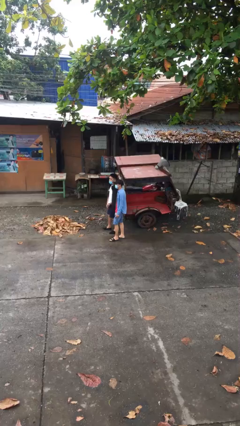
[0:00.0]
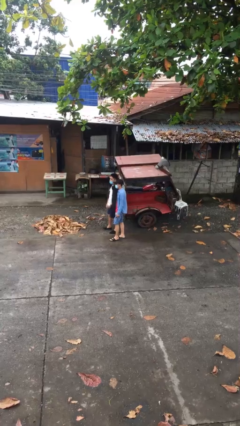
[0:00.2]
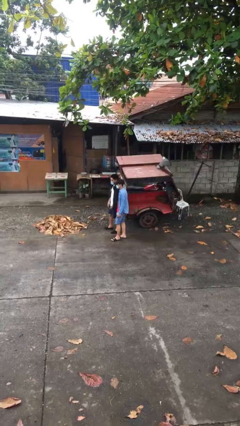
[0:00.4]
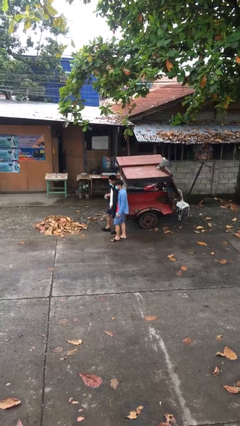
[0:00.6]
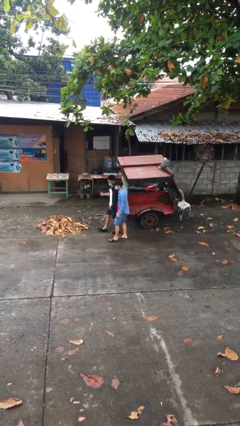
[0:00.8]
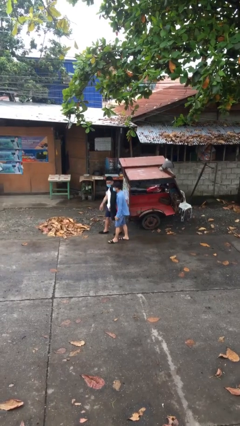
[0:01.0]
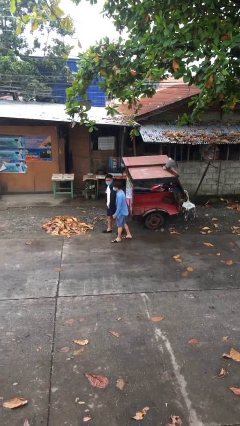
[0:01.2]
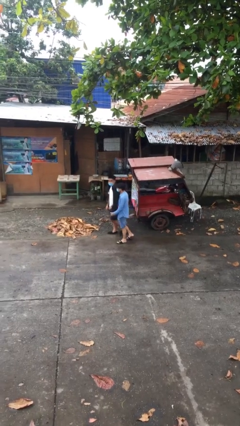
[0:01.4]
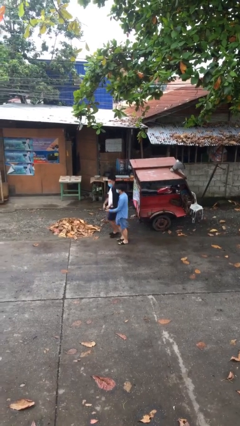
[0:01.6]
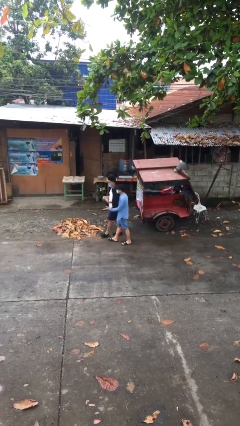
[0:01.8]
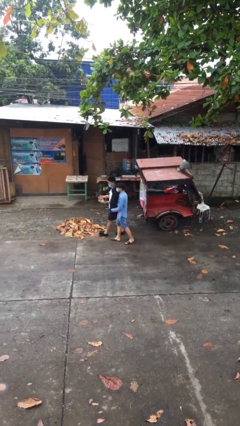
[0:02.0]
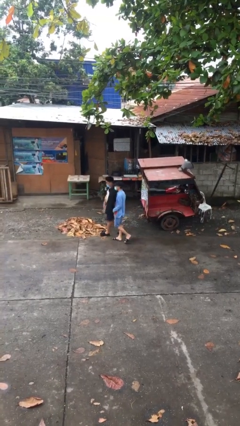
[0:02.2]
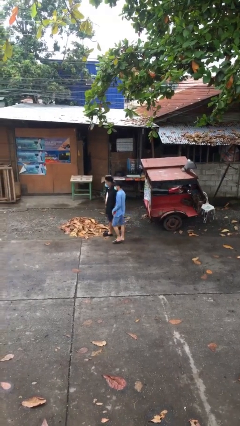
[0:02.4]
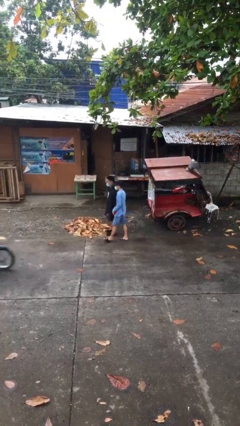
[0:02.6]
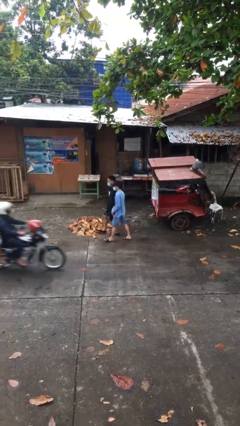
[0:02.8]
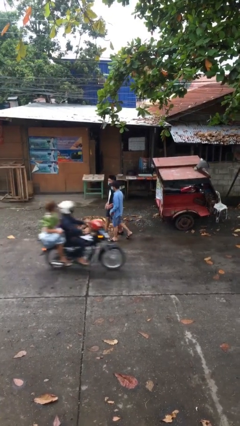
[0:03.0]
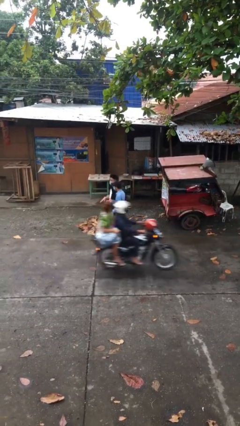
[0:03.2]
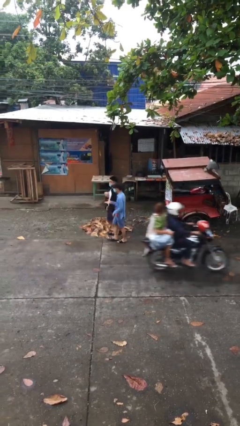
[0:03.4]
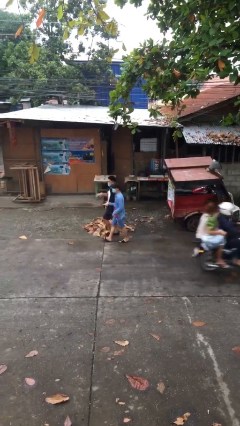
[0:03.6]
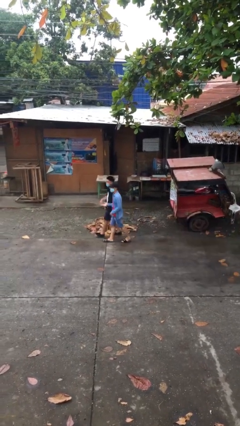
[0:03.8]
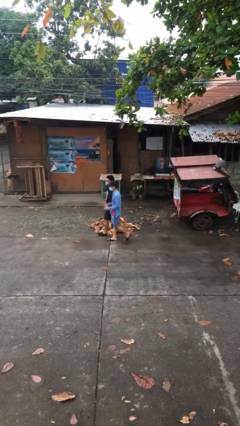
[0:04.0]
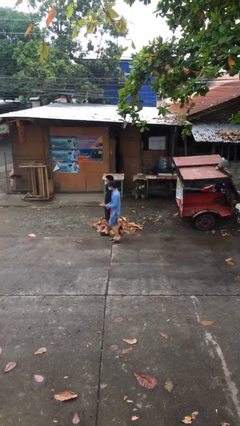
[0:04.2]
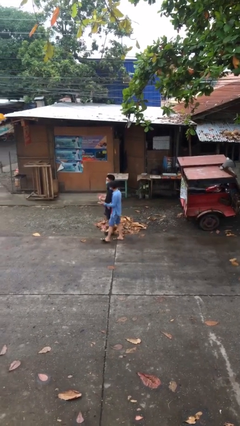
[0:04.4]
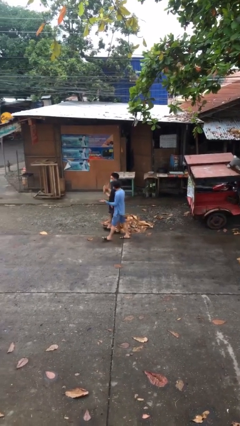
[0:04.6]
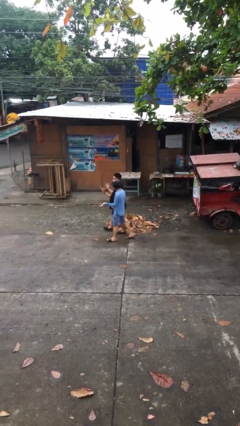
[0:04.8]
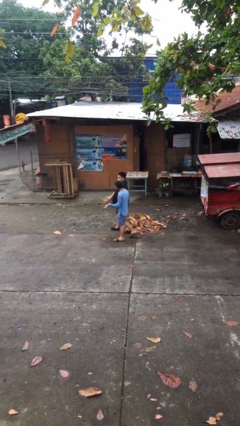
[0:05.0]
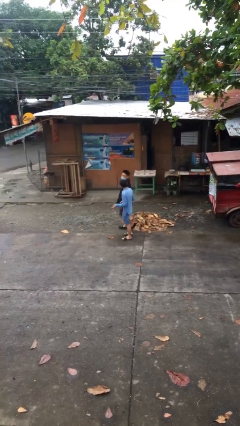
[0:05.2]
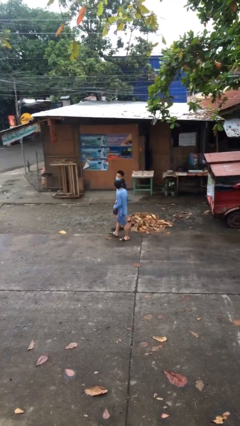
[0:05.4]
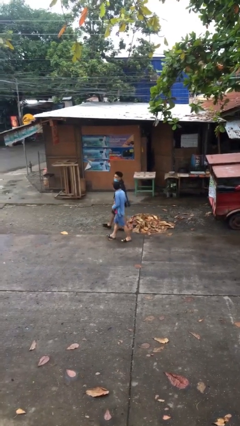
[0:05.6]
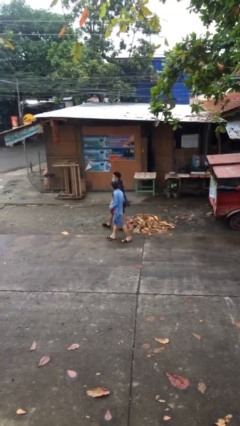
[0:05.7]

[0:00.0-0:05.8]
person talks to person

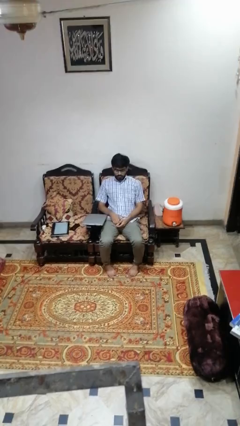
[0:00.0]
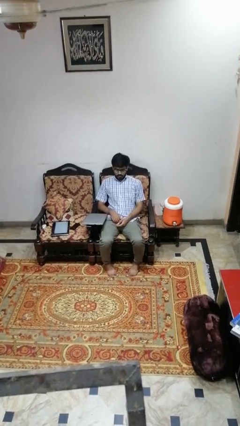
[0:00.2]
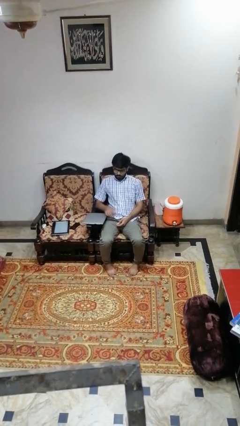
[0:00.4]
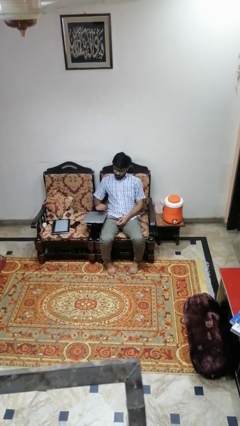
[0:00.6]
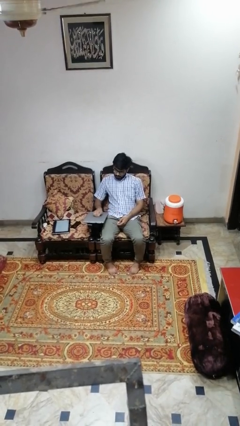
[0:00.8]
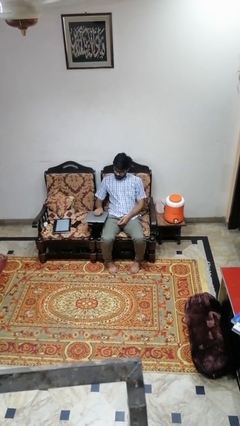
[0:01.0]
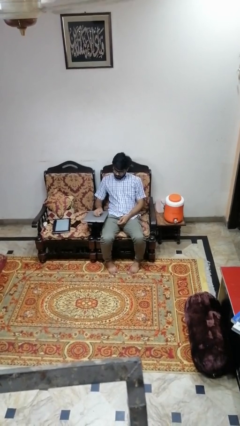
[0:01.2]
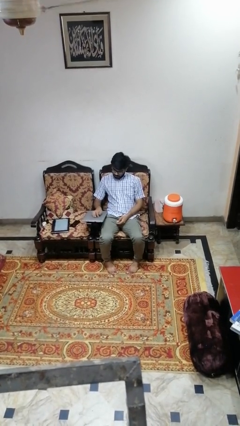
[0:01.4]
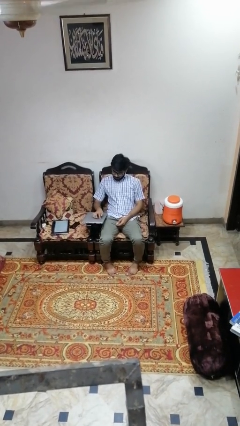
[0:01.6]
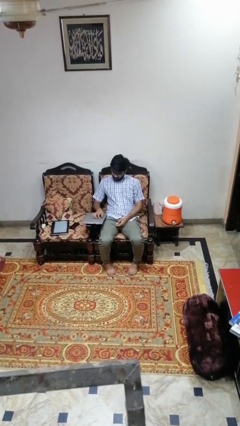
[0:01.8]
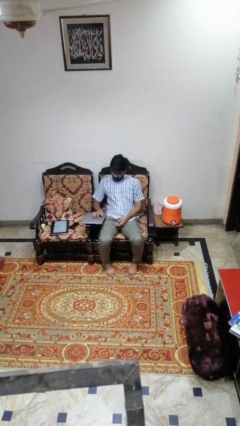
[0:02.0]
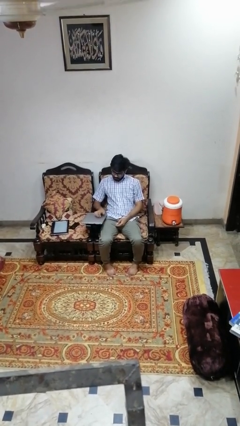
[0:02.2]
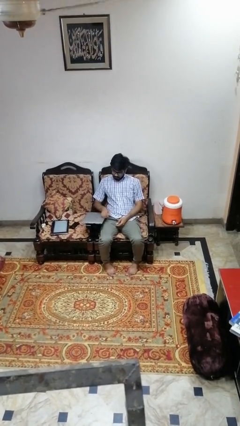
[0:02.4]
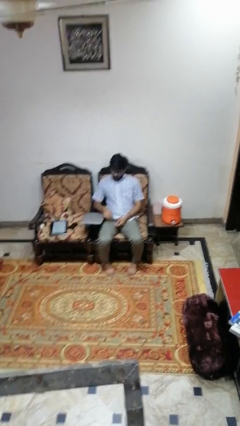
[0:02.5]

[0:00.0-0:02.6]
person taps object with finger

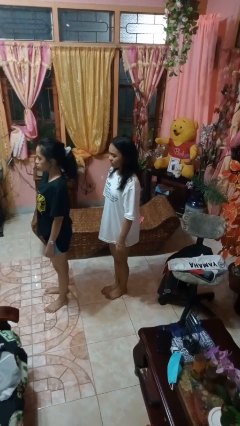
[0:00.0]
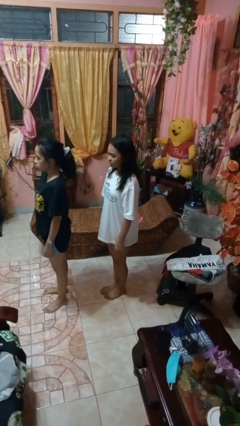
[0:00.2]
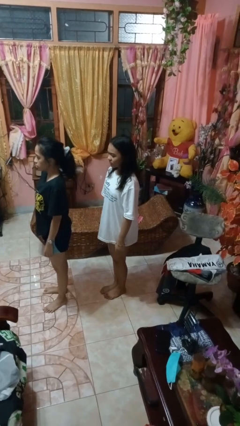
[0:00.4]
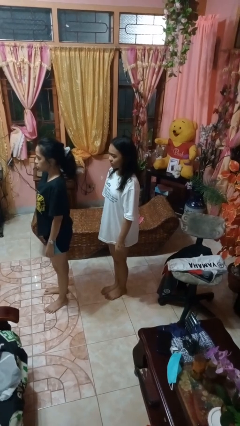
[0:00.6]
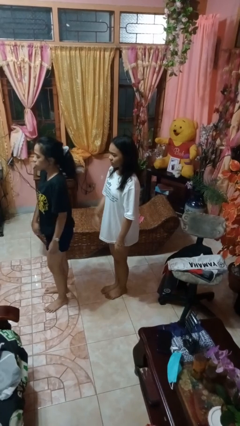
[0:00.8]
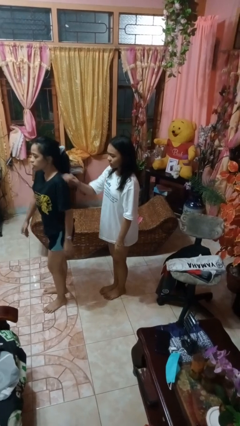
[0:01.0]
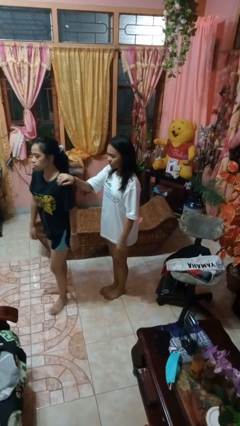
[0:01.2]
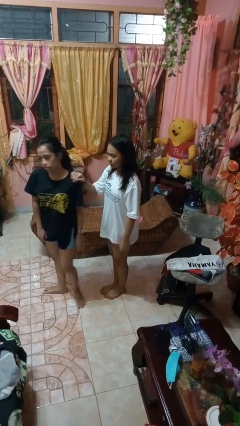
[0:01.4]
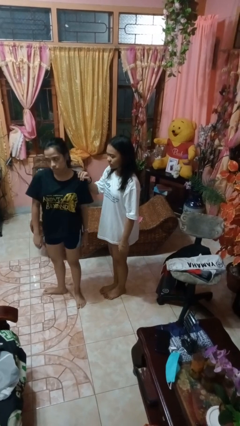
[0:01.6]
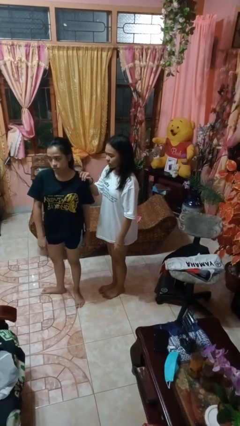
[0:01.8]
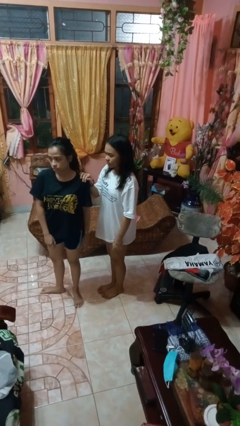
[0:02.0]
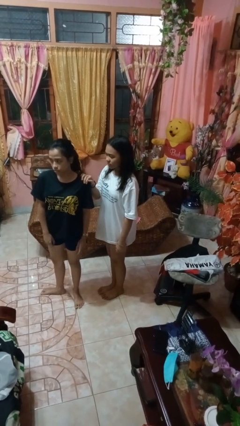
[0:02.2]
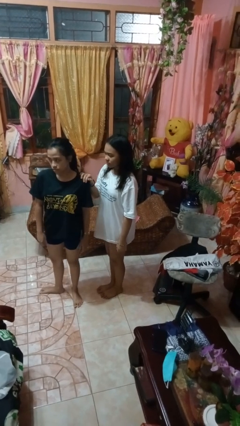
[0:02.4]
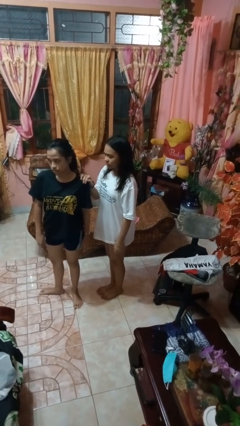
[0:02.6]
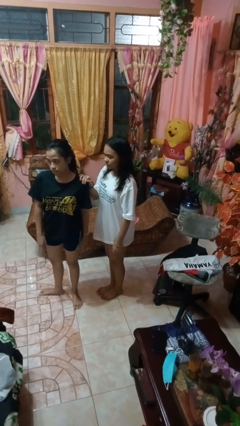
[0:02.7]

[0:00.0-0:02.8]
person grabs person by shoulder

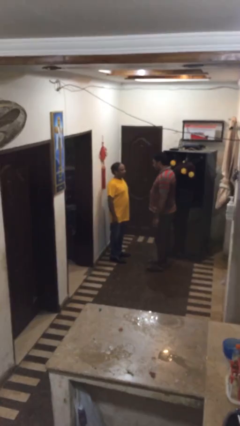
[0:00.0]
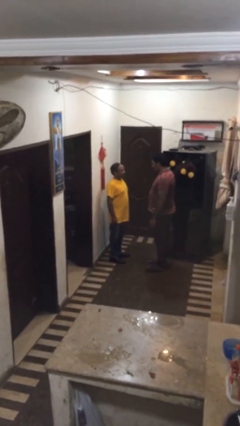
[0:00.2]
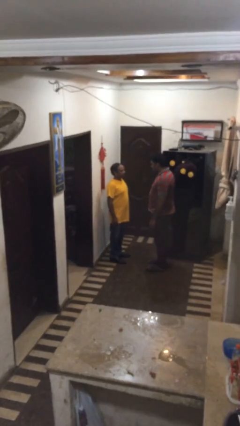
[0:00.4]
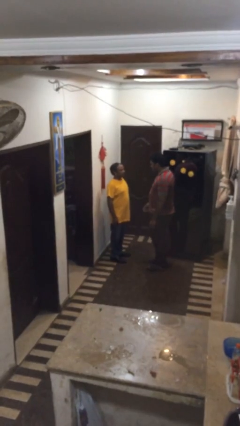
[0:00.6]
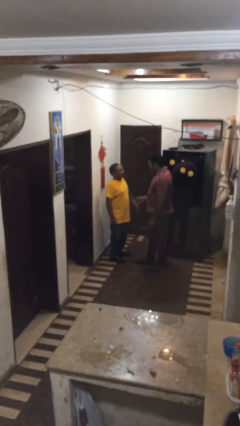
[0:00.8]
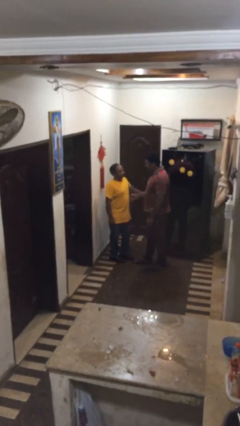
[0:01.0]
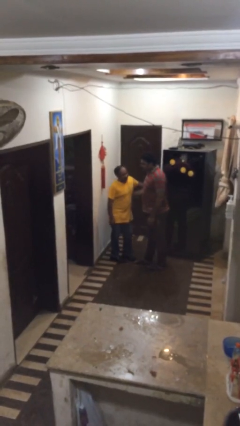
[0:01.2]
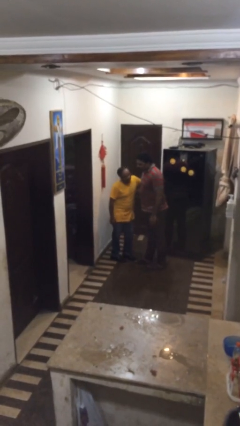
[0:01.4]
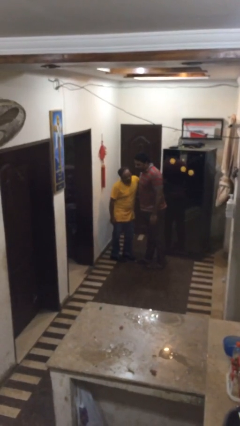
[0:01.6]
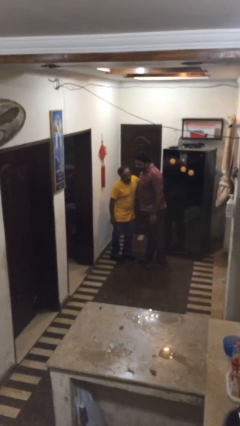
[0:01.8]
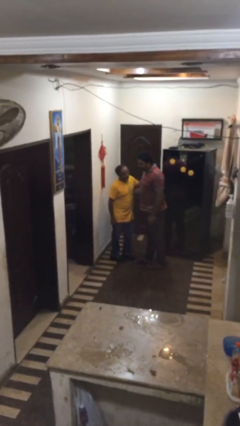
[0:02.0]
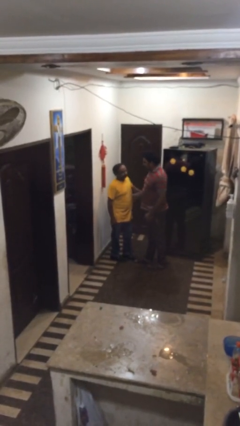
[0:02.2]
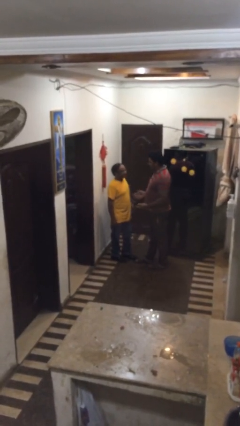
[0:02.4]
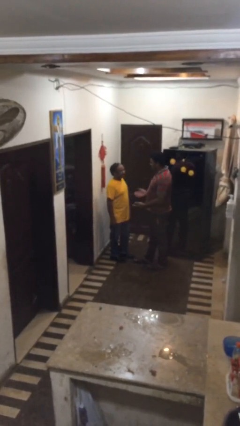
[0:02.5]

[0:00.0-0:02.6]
person embraces person

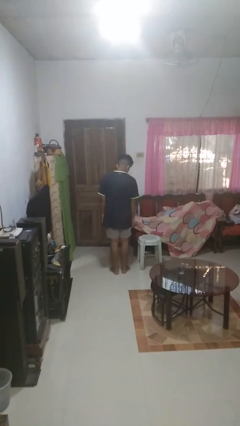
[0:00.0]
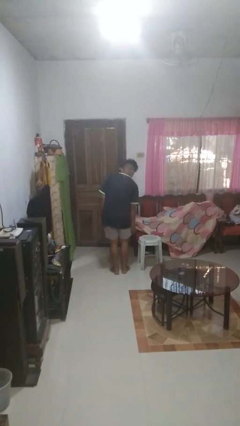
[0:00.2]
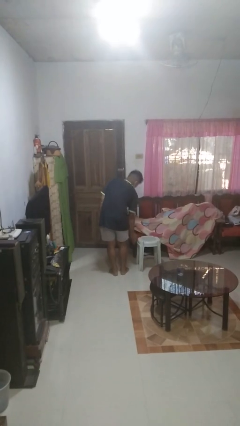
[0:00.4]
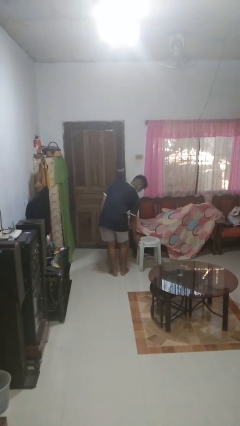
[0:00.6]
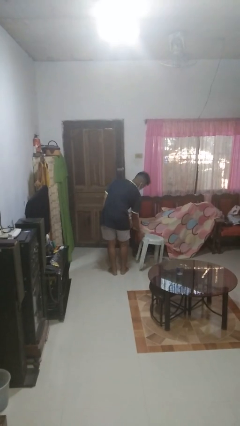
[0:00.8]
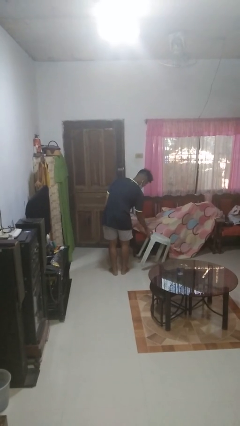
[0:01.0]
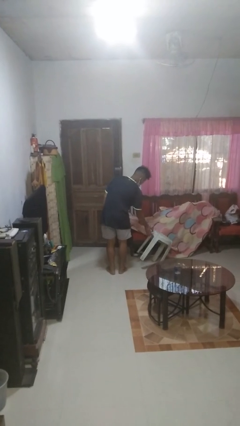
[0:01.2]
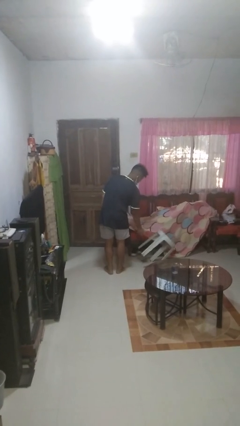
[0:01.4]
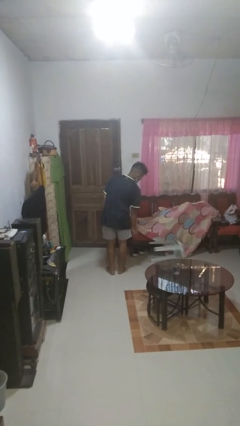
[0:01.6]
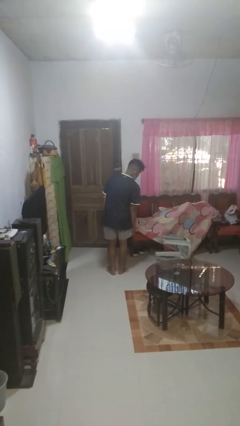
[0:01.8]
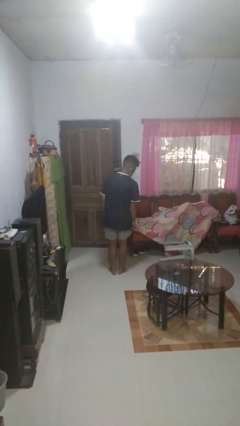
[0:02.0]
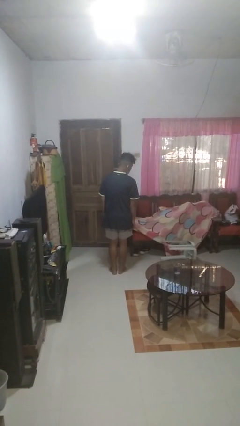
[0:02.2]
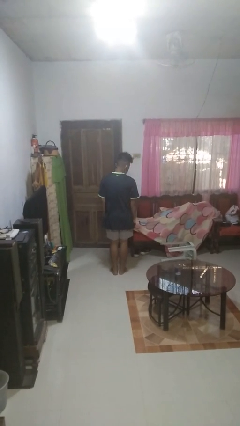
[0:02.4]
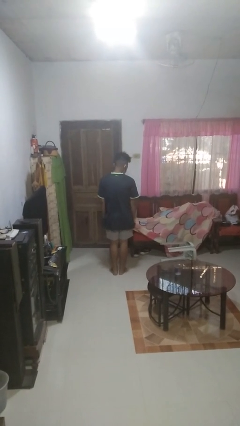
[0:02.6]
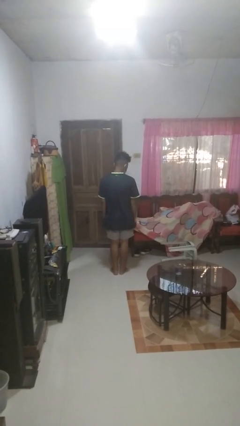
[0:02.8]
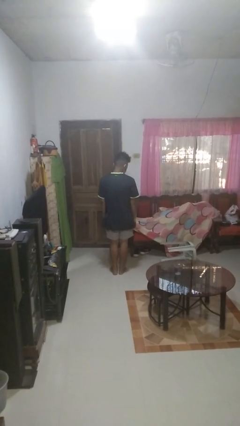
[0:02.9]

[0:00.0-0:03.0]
person knocks over furniture

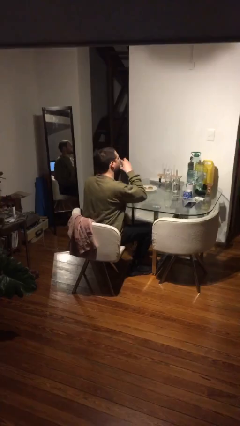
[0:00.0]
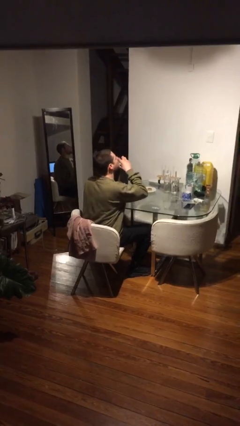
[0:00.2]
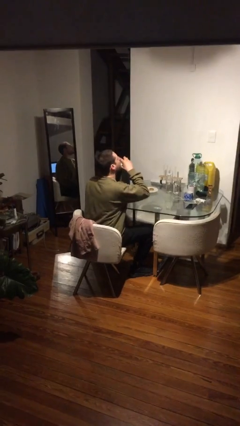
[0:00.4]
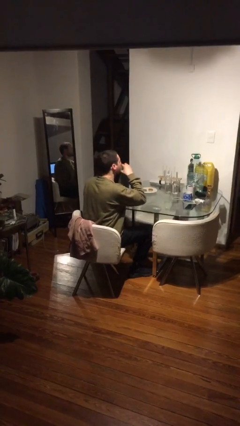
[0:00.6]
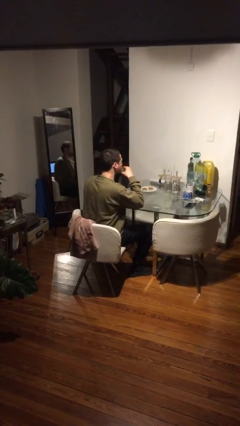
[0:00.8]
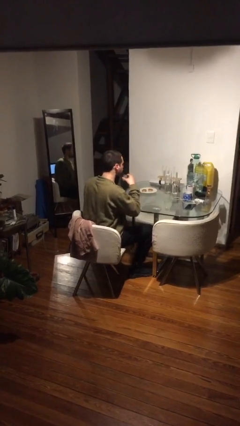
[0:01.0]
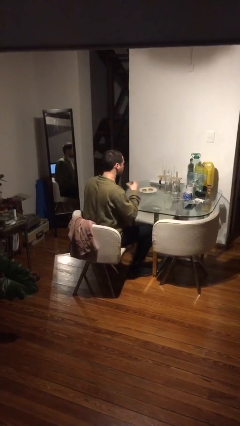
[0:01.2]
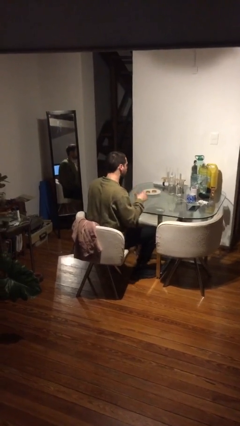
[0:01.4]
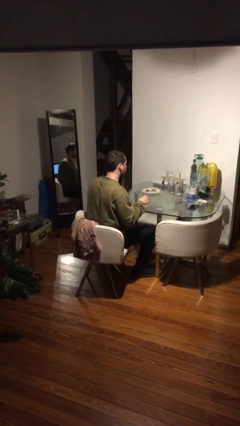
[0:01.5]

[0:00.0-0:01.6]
person drinks from shotglass
